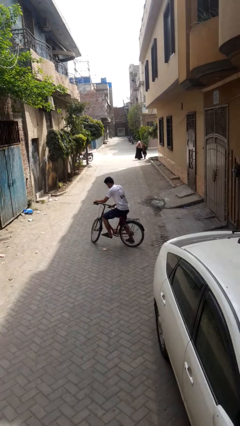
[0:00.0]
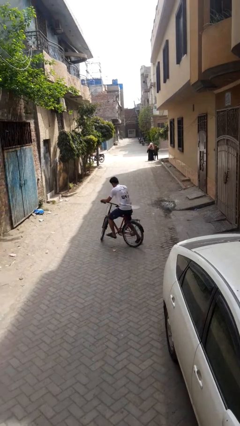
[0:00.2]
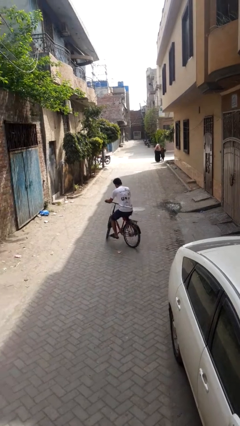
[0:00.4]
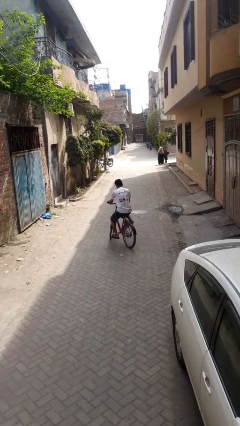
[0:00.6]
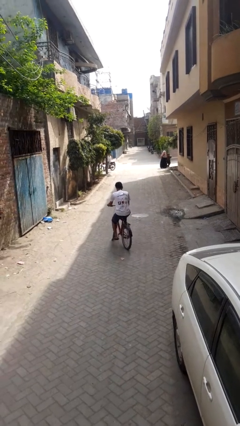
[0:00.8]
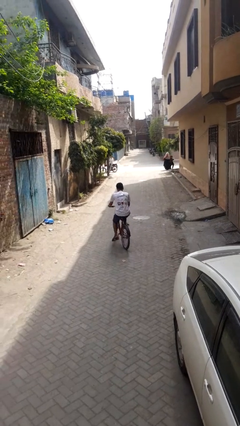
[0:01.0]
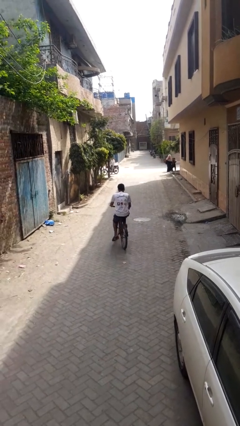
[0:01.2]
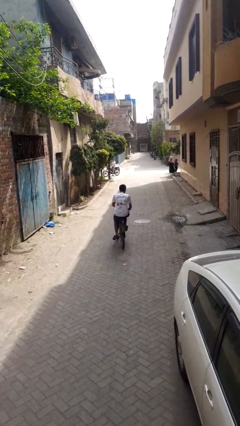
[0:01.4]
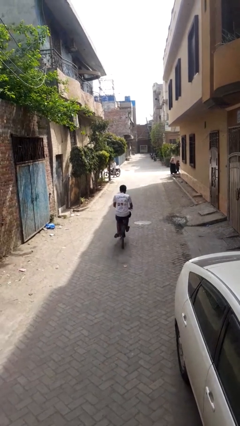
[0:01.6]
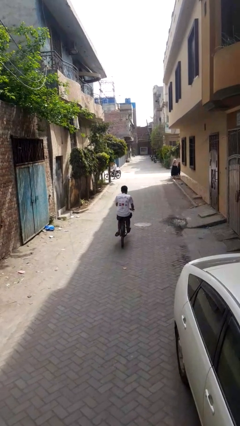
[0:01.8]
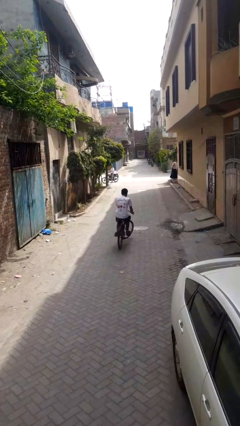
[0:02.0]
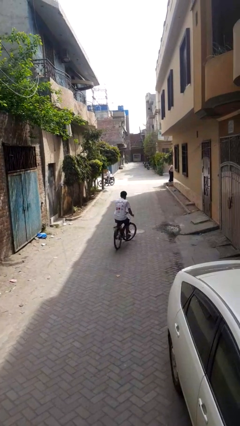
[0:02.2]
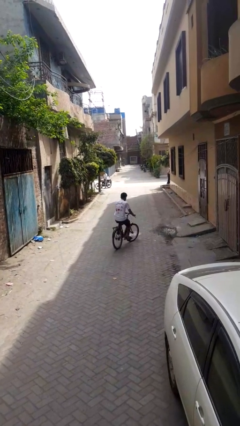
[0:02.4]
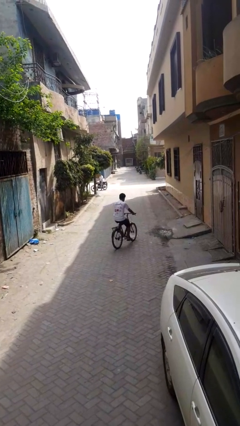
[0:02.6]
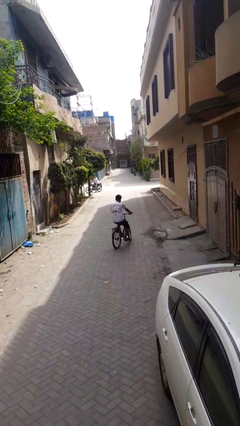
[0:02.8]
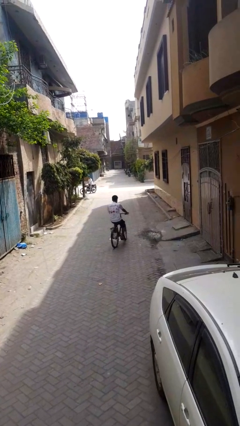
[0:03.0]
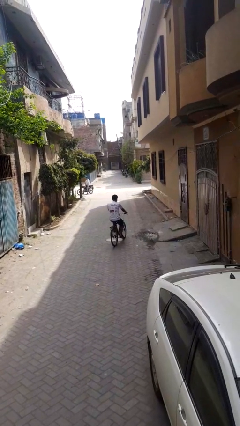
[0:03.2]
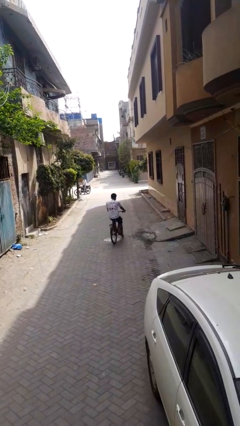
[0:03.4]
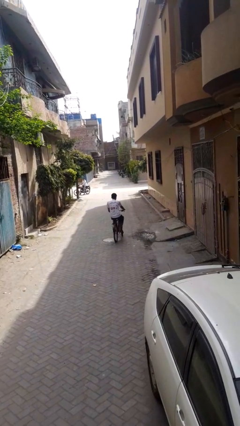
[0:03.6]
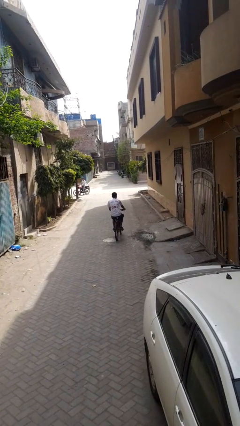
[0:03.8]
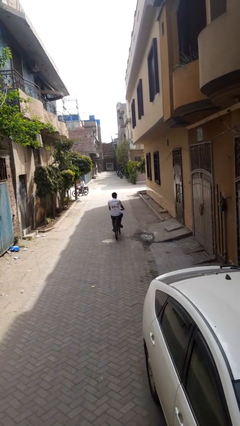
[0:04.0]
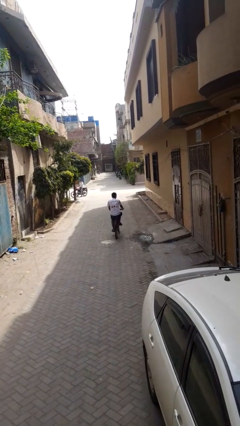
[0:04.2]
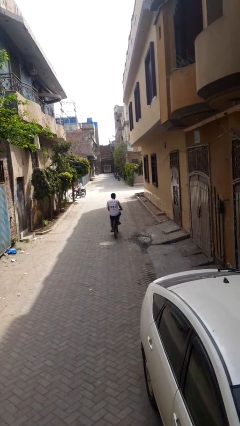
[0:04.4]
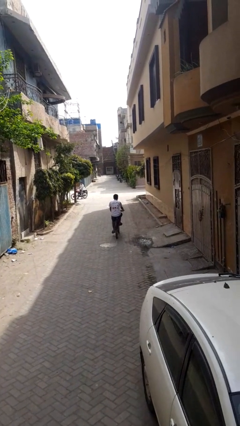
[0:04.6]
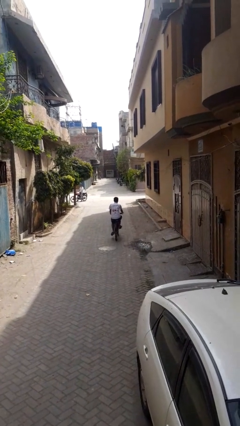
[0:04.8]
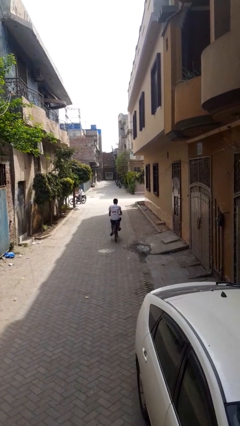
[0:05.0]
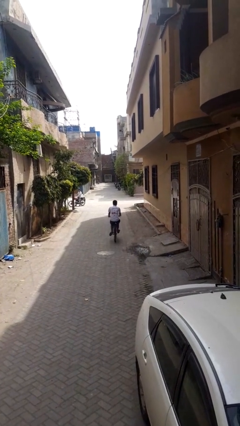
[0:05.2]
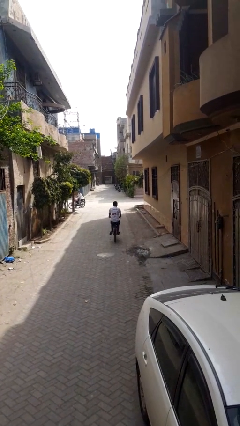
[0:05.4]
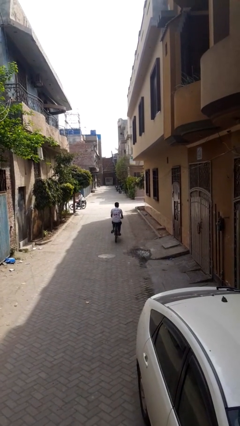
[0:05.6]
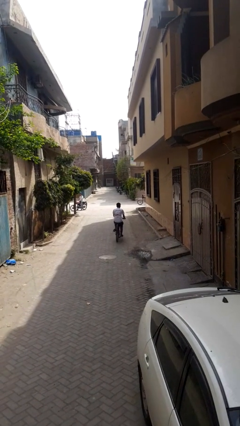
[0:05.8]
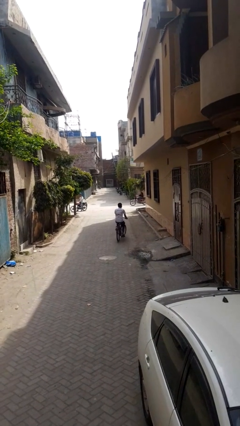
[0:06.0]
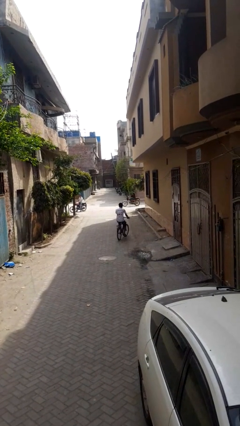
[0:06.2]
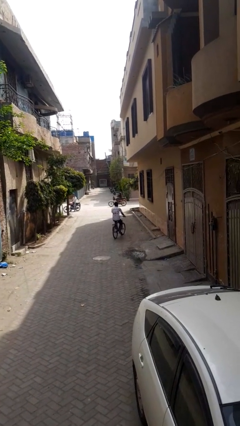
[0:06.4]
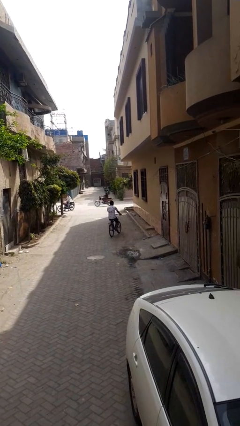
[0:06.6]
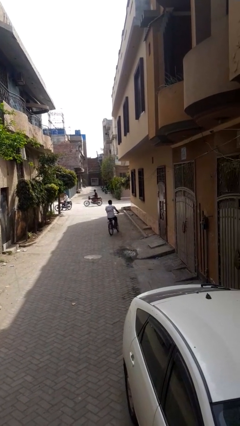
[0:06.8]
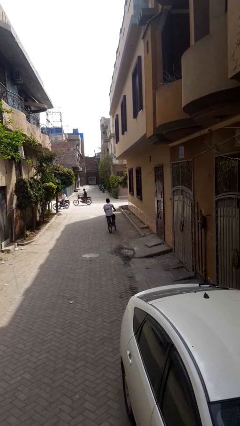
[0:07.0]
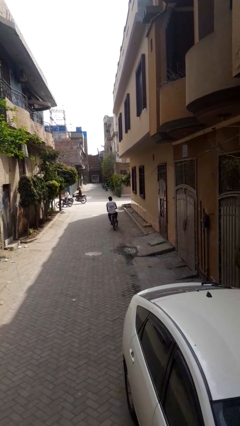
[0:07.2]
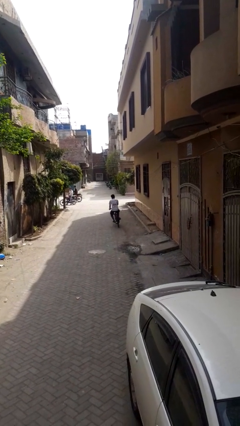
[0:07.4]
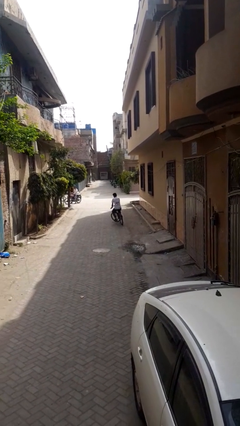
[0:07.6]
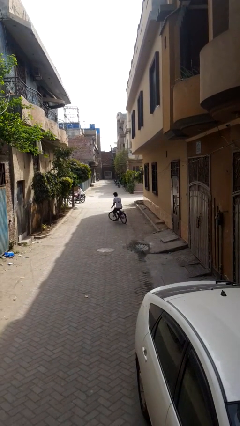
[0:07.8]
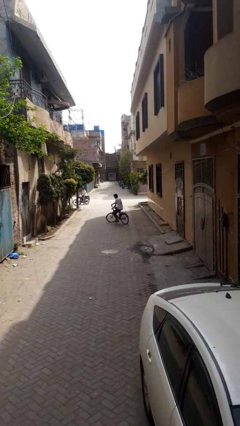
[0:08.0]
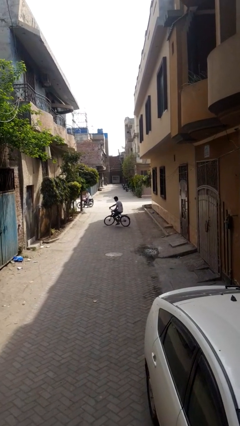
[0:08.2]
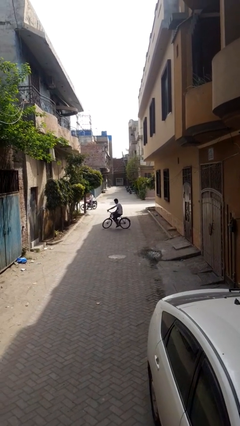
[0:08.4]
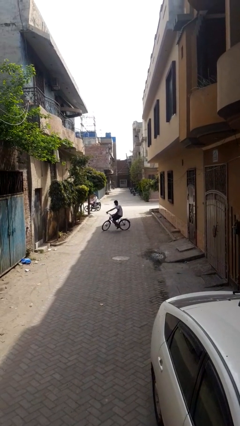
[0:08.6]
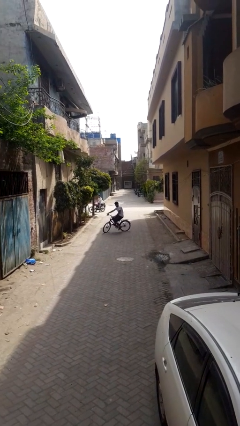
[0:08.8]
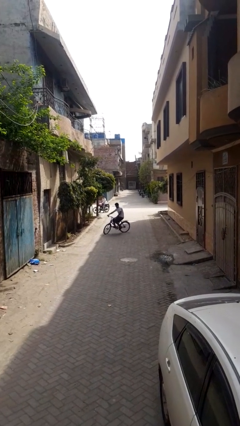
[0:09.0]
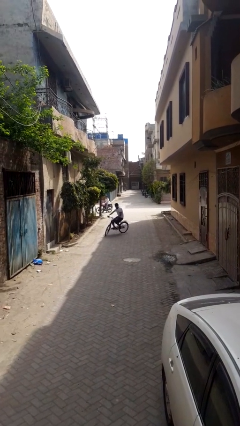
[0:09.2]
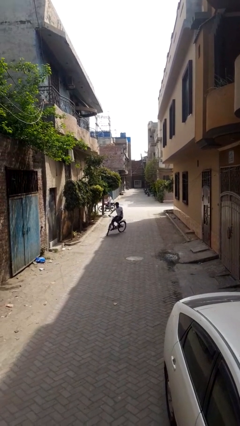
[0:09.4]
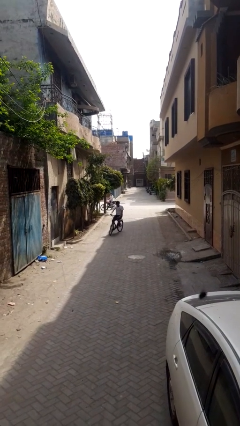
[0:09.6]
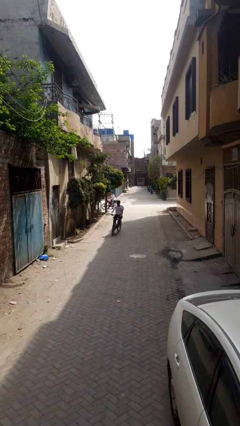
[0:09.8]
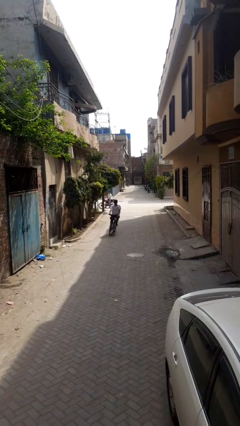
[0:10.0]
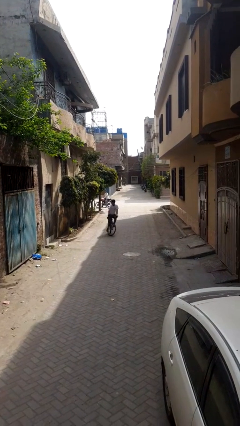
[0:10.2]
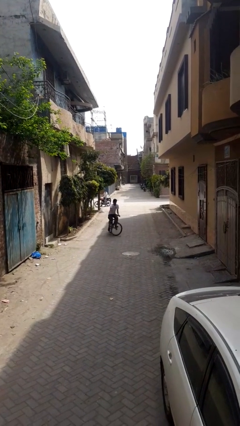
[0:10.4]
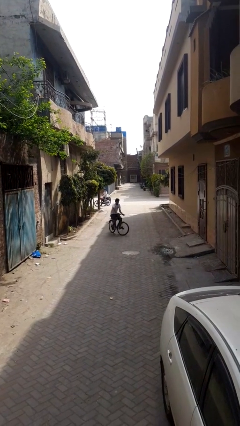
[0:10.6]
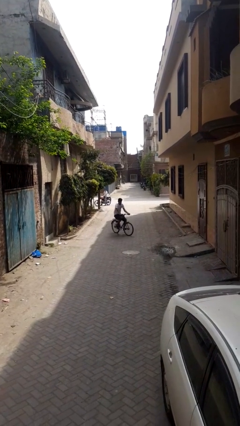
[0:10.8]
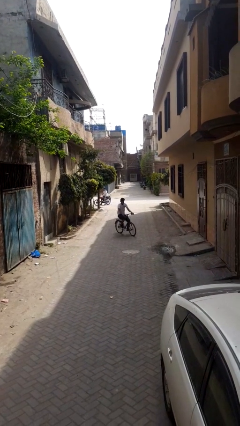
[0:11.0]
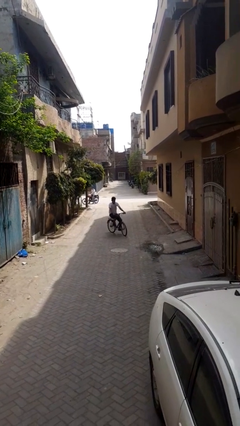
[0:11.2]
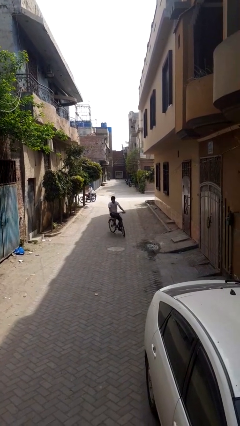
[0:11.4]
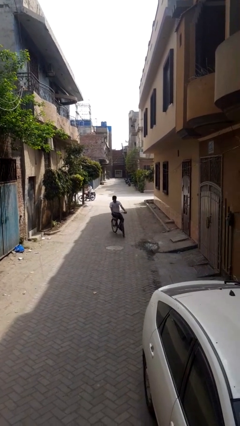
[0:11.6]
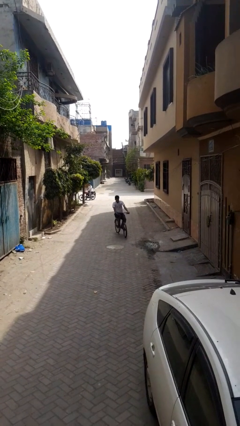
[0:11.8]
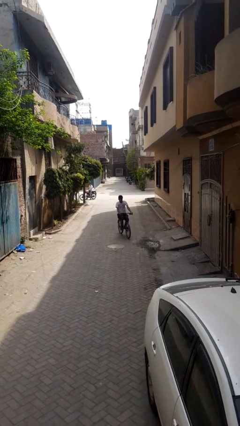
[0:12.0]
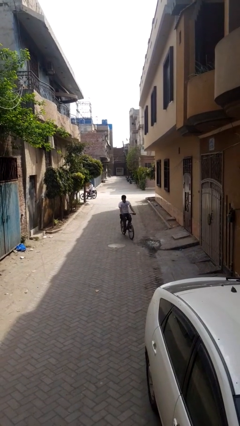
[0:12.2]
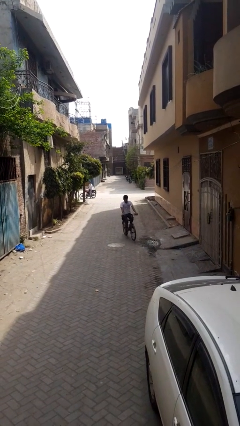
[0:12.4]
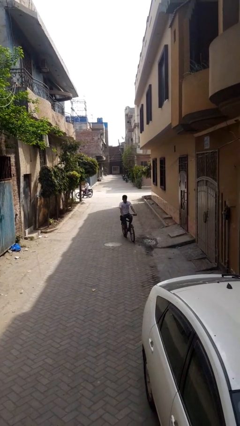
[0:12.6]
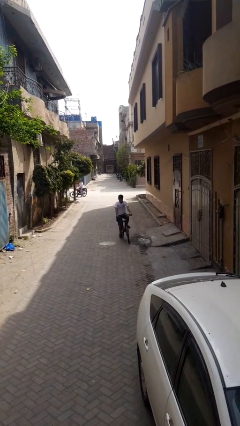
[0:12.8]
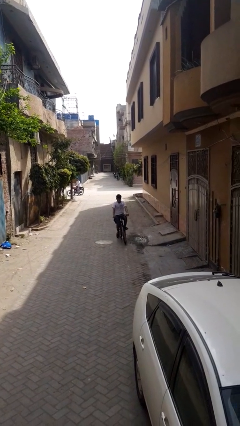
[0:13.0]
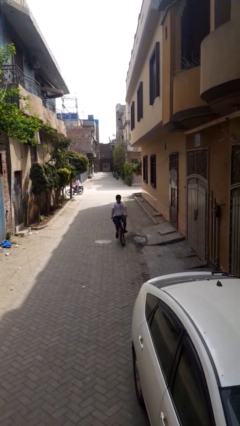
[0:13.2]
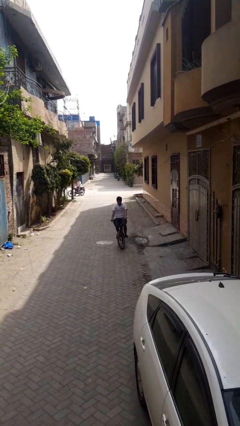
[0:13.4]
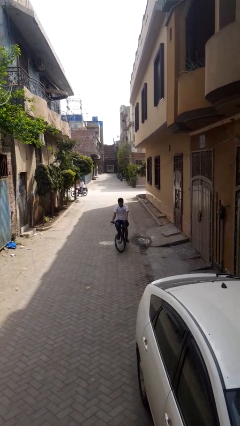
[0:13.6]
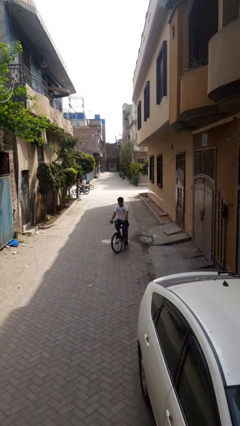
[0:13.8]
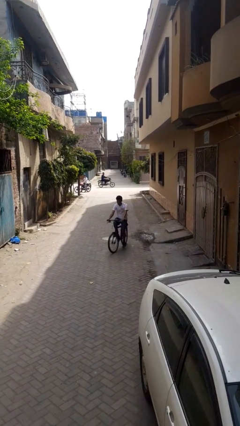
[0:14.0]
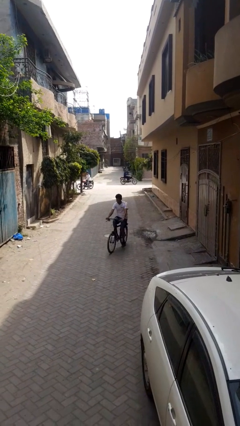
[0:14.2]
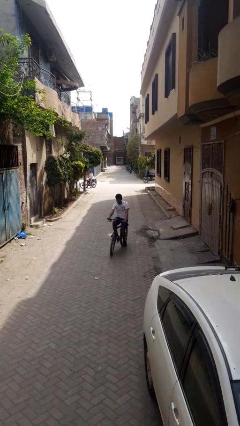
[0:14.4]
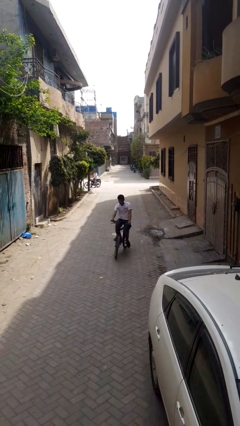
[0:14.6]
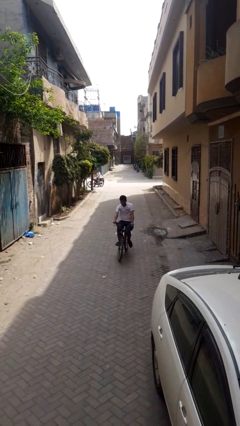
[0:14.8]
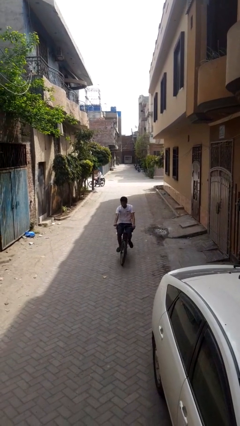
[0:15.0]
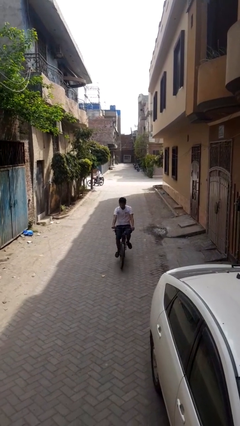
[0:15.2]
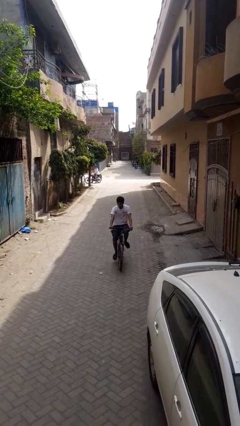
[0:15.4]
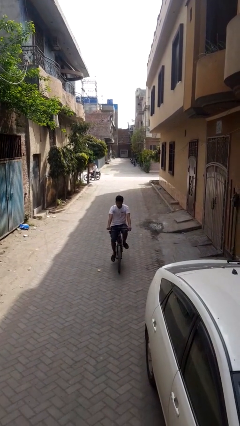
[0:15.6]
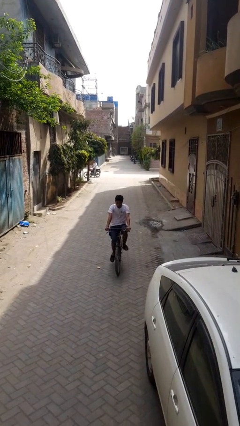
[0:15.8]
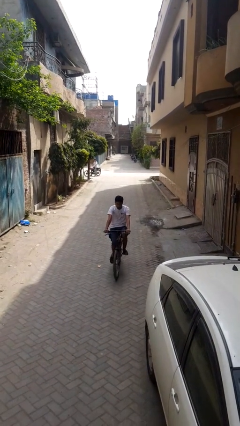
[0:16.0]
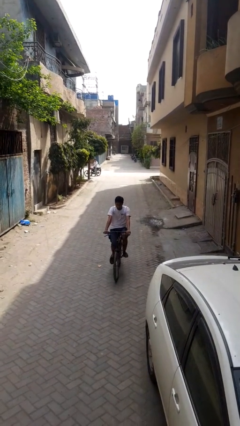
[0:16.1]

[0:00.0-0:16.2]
person rides bicycle

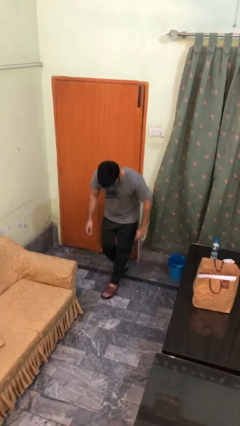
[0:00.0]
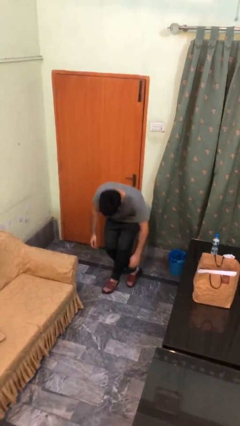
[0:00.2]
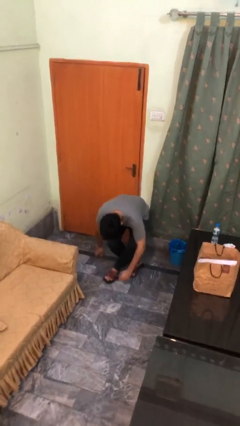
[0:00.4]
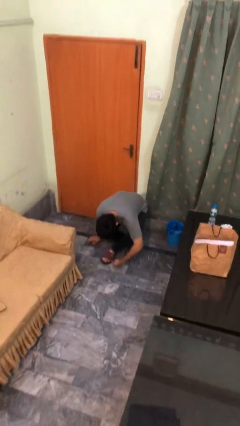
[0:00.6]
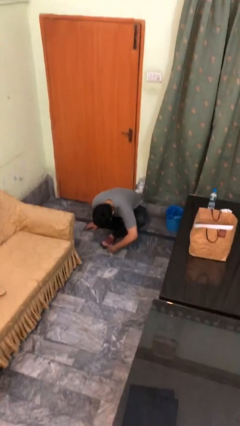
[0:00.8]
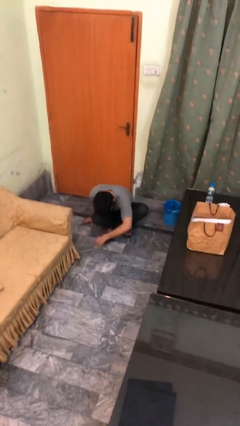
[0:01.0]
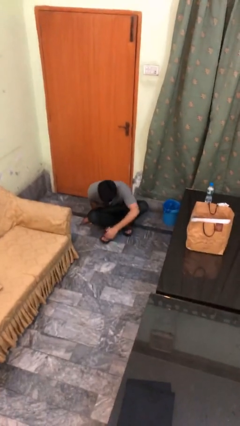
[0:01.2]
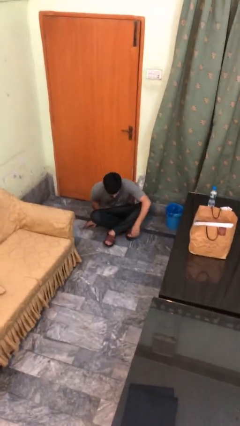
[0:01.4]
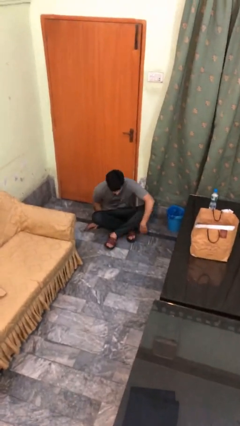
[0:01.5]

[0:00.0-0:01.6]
person sits crisscross
